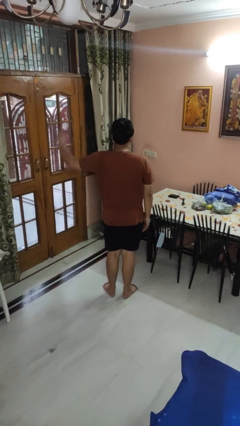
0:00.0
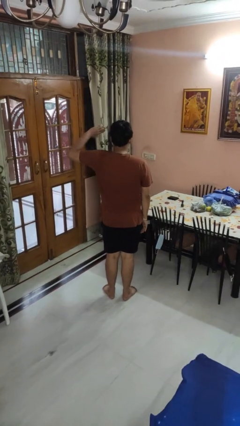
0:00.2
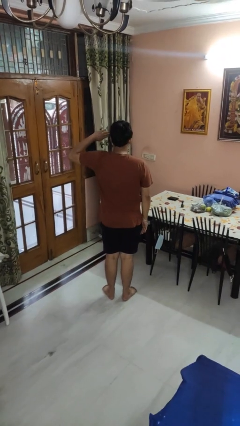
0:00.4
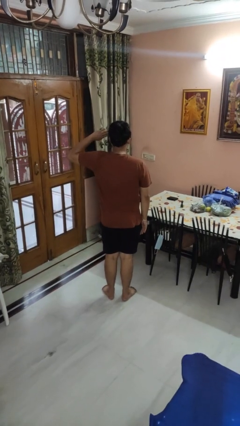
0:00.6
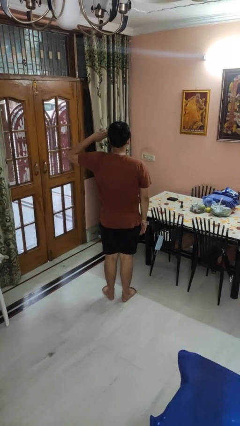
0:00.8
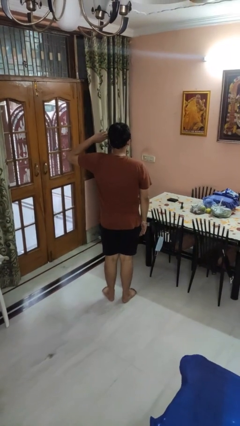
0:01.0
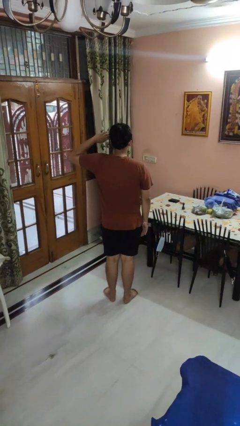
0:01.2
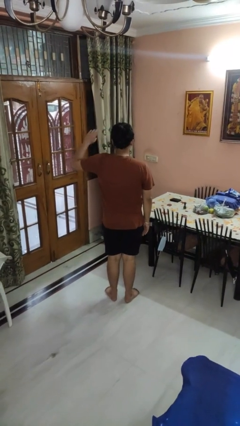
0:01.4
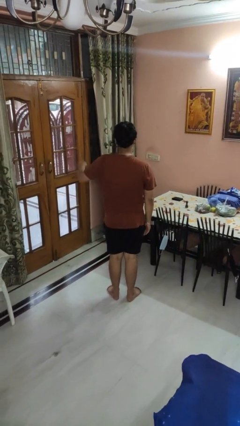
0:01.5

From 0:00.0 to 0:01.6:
person salutes

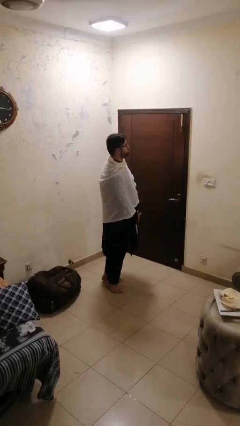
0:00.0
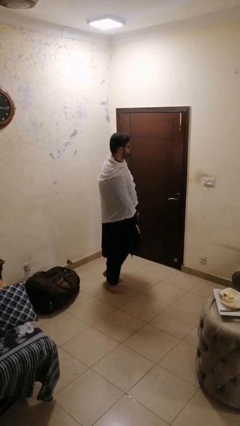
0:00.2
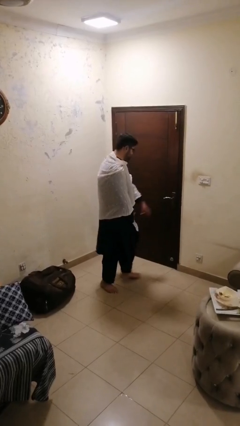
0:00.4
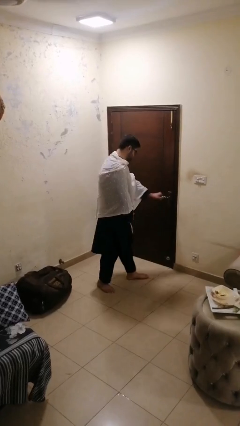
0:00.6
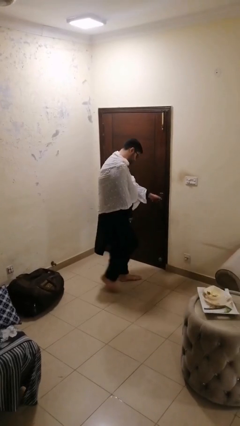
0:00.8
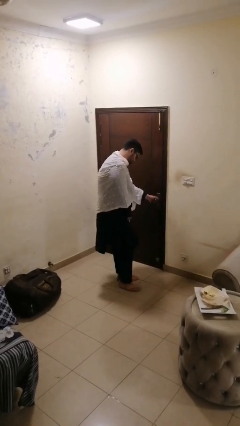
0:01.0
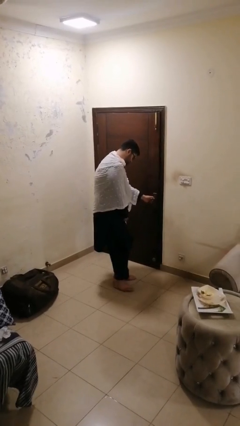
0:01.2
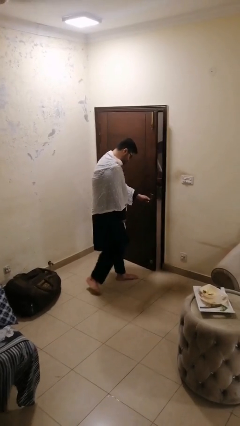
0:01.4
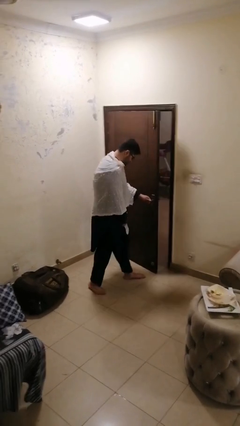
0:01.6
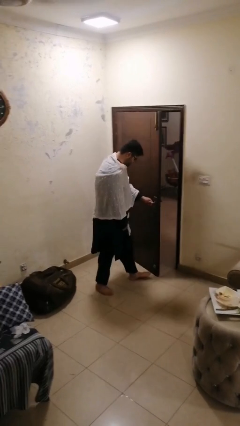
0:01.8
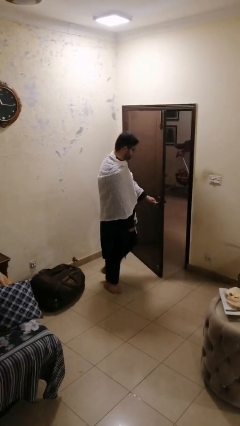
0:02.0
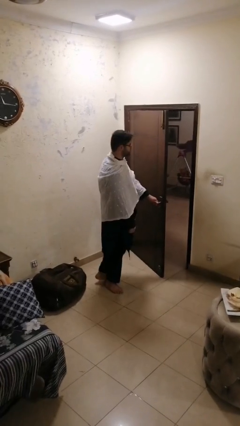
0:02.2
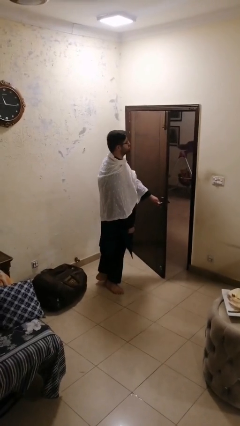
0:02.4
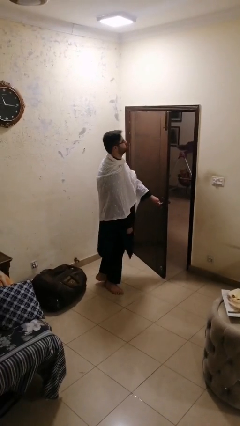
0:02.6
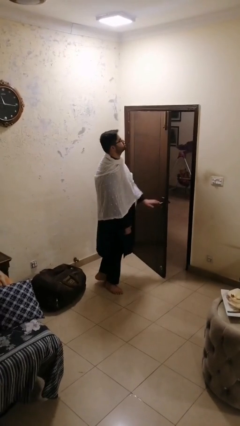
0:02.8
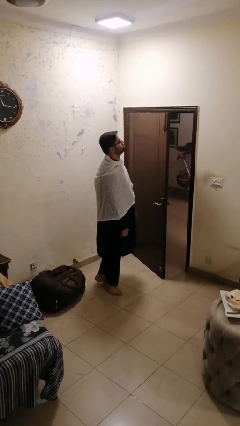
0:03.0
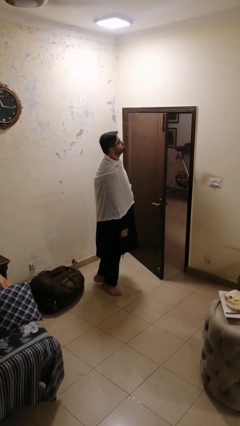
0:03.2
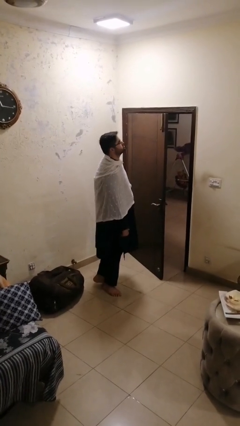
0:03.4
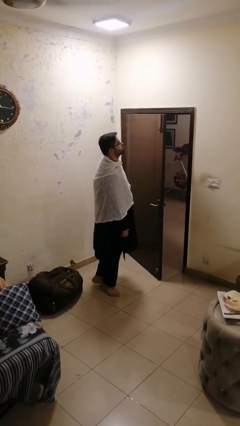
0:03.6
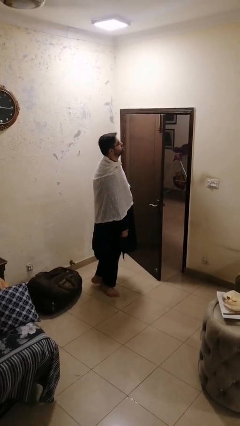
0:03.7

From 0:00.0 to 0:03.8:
person opens facility door

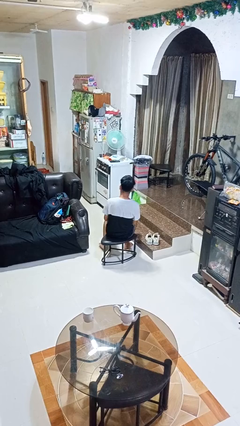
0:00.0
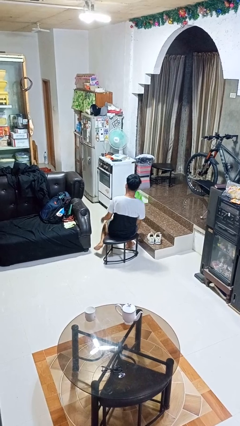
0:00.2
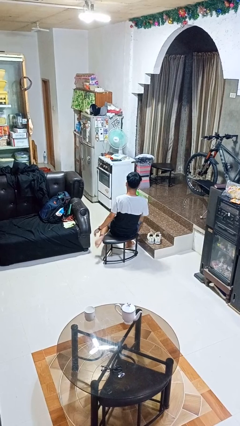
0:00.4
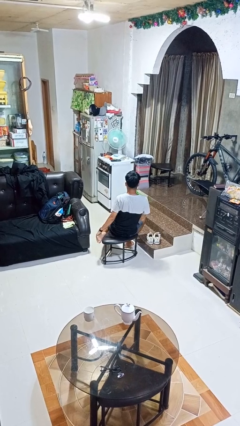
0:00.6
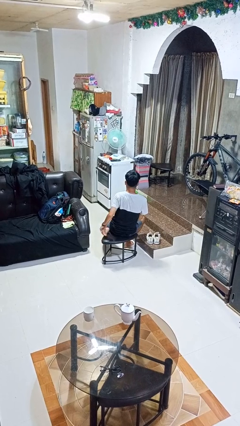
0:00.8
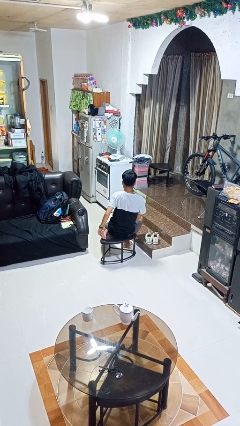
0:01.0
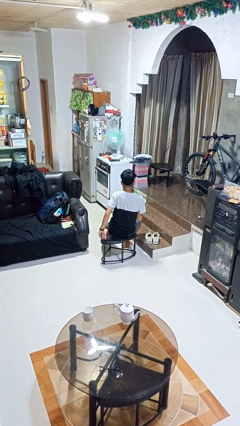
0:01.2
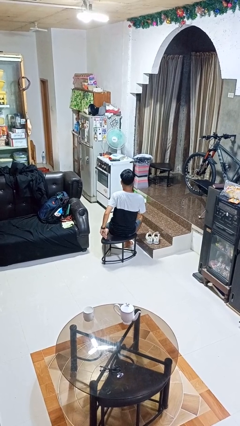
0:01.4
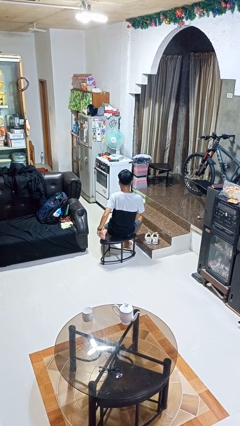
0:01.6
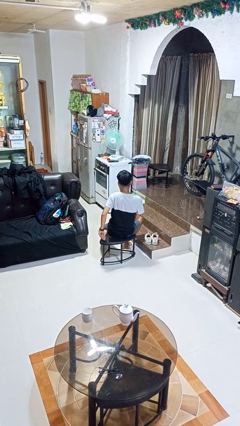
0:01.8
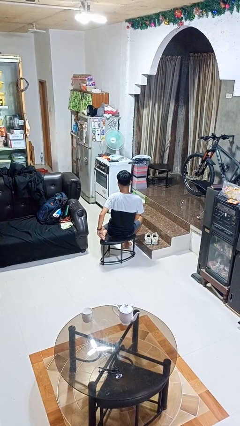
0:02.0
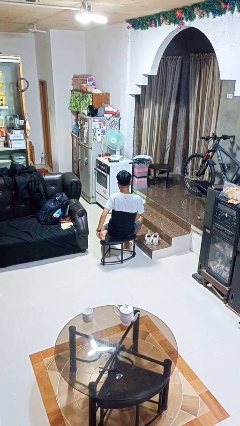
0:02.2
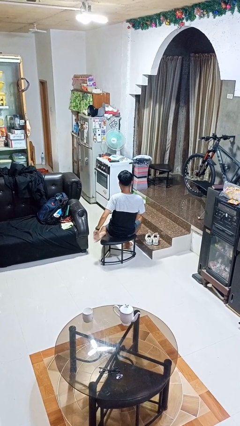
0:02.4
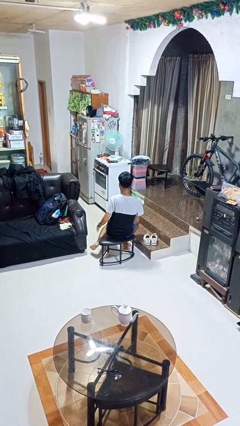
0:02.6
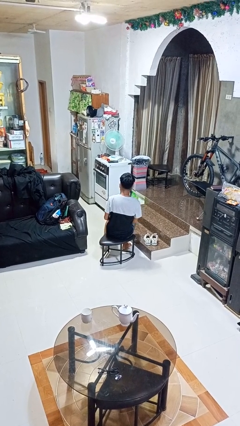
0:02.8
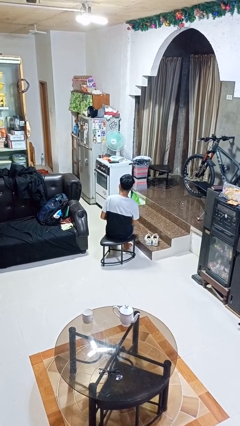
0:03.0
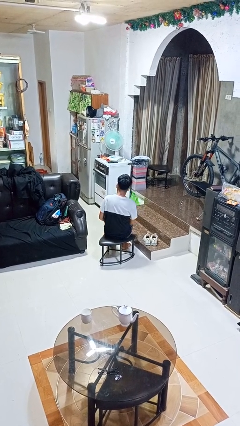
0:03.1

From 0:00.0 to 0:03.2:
person rubs foot

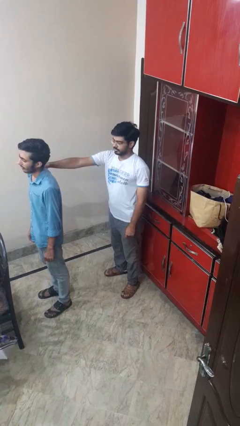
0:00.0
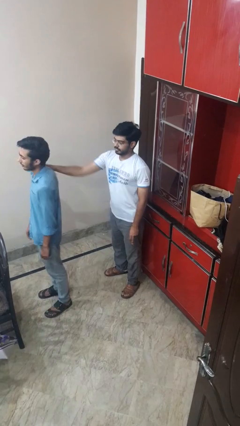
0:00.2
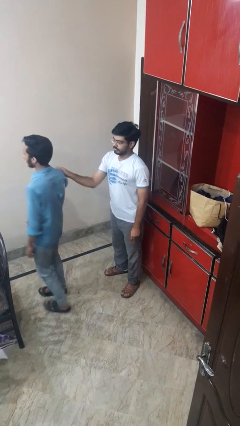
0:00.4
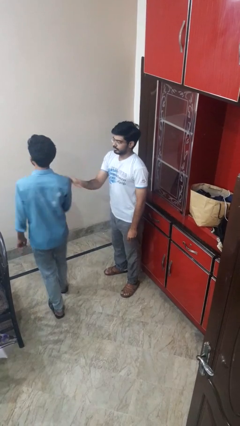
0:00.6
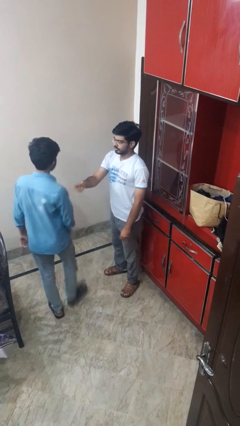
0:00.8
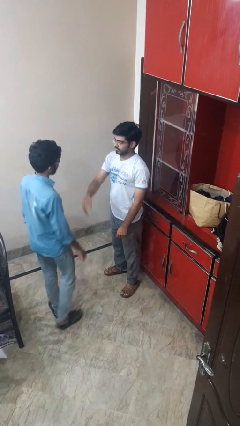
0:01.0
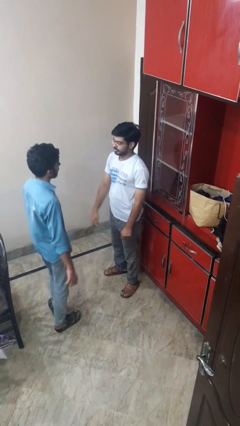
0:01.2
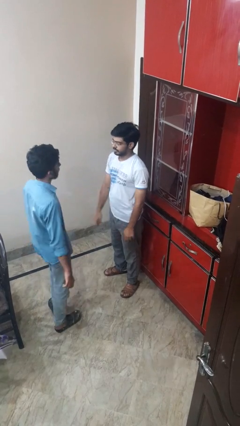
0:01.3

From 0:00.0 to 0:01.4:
person spins person around

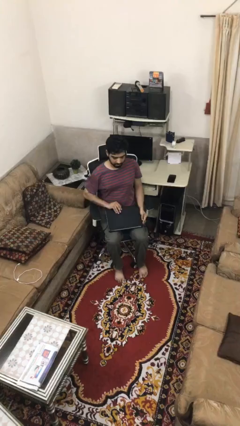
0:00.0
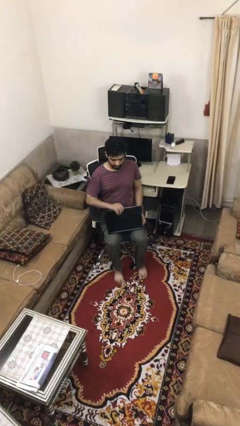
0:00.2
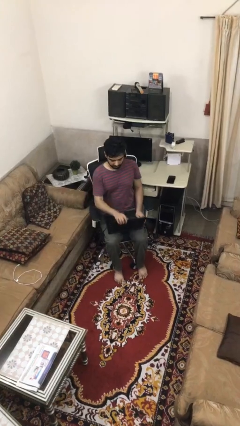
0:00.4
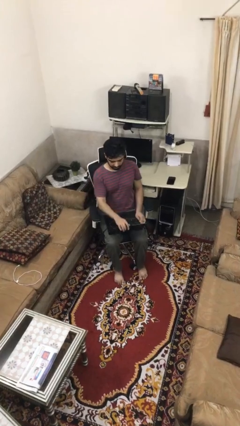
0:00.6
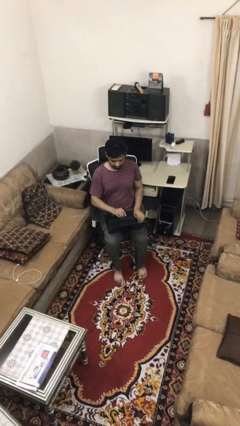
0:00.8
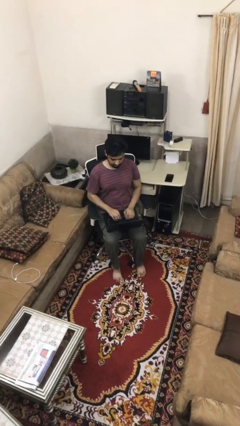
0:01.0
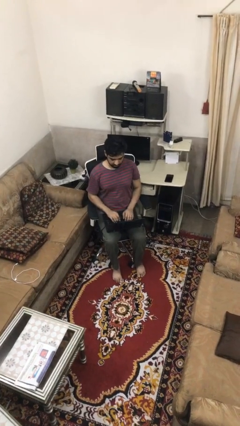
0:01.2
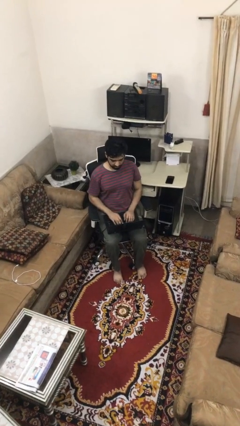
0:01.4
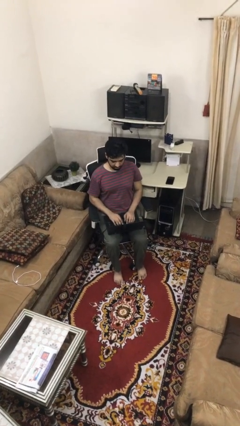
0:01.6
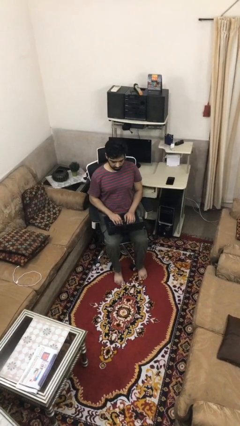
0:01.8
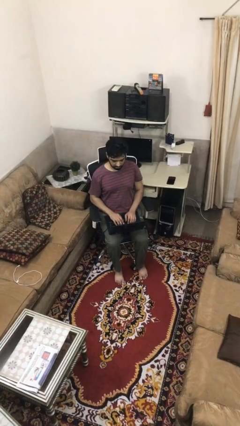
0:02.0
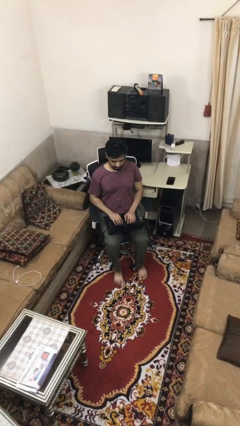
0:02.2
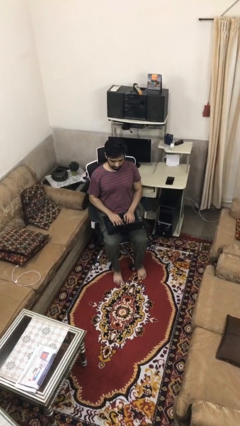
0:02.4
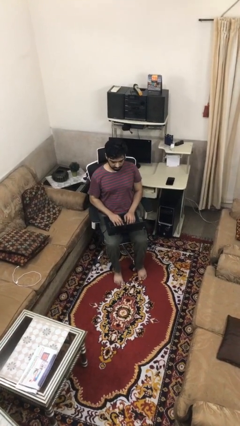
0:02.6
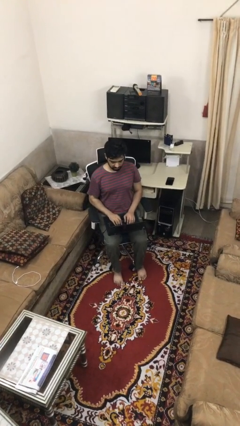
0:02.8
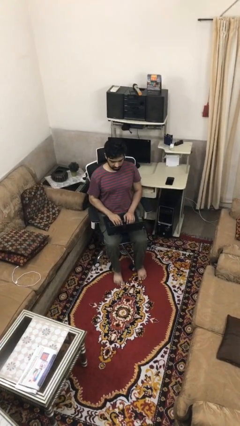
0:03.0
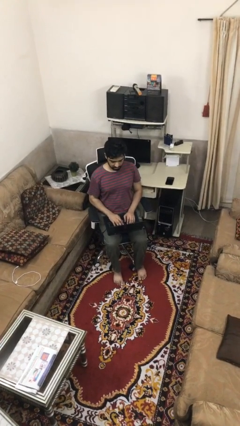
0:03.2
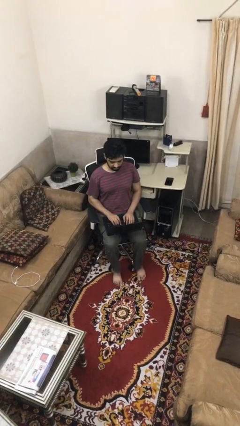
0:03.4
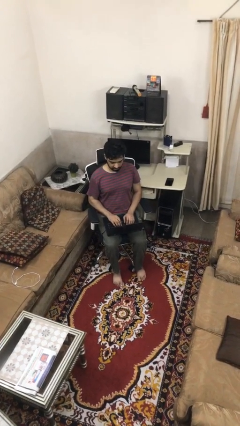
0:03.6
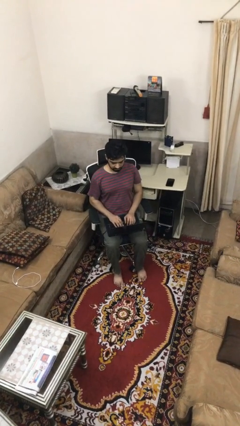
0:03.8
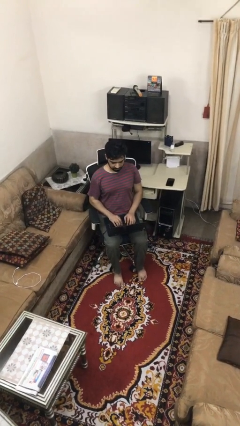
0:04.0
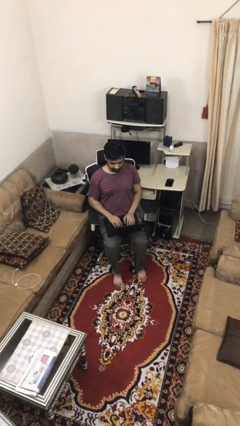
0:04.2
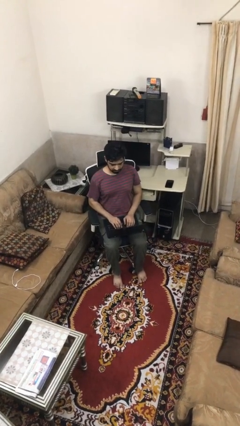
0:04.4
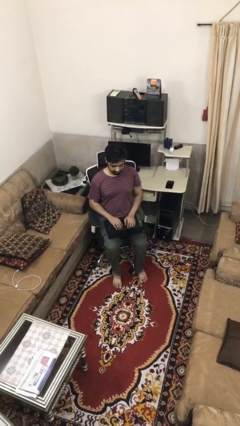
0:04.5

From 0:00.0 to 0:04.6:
person interacts with laptop

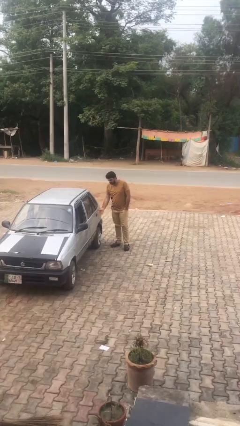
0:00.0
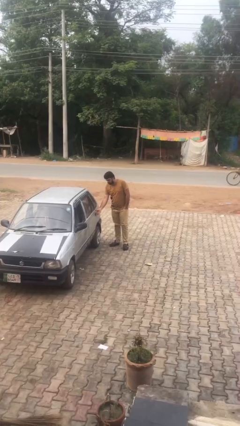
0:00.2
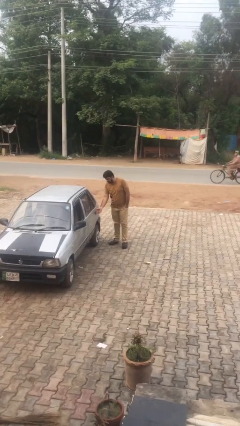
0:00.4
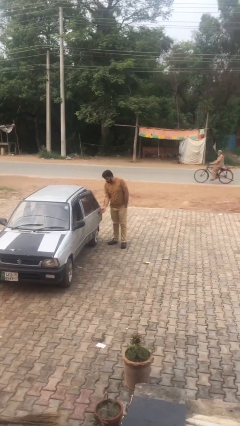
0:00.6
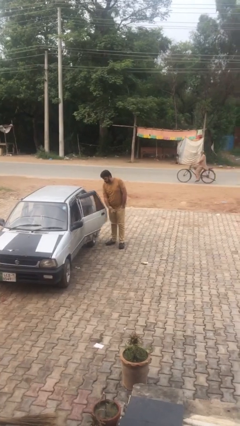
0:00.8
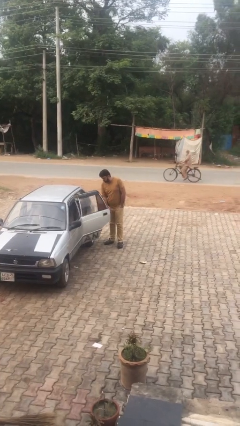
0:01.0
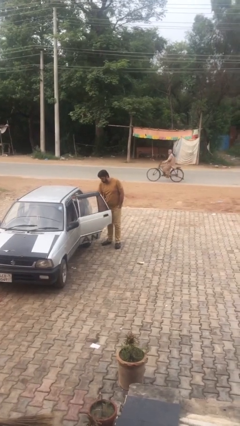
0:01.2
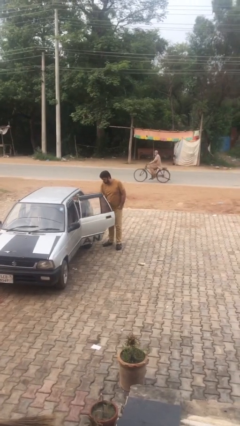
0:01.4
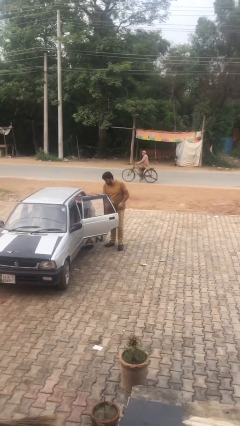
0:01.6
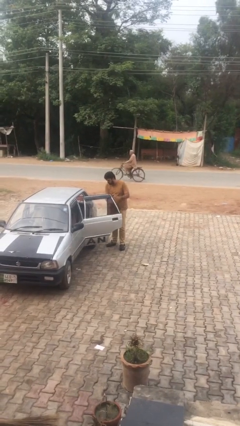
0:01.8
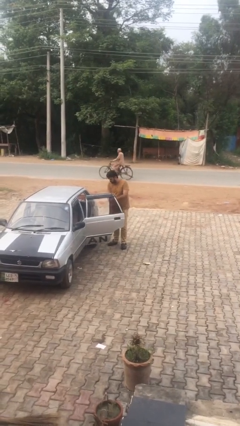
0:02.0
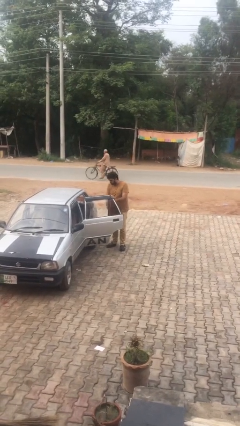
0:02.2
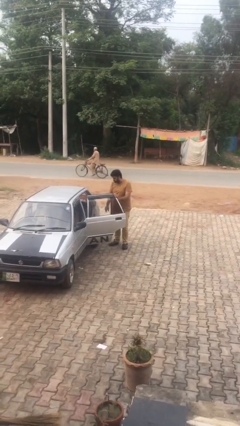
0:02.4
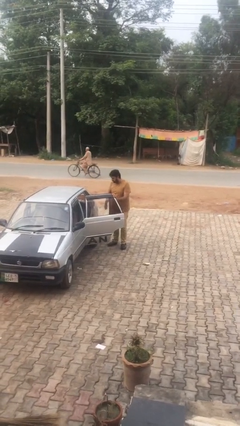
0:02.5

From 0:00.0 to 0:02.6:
person opens car door

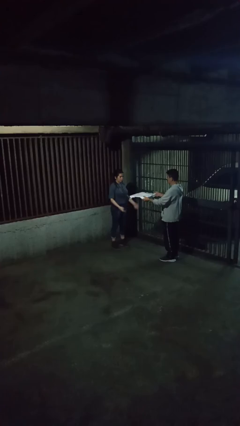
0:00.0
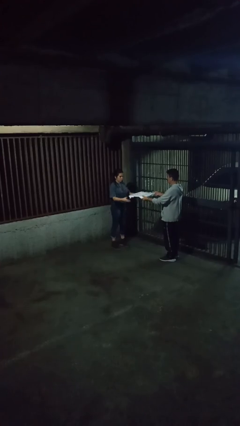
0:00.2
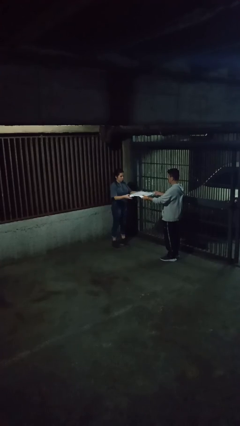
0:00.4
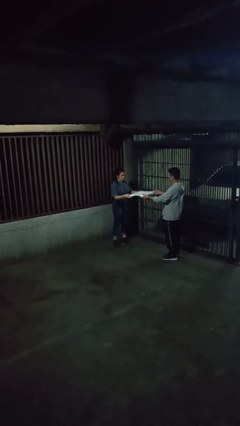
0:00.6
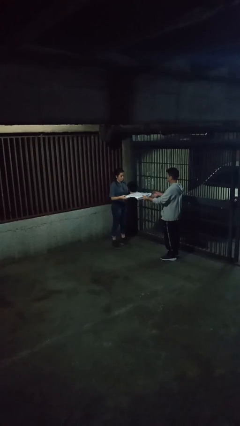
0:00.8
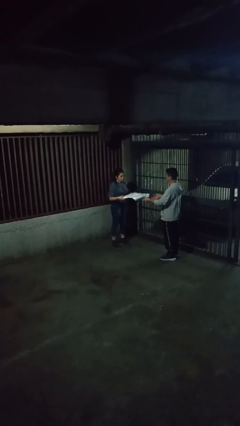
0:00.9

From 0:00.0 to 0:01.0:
person transfers object to person
